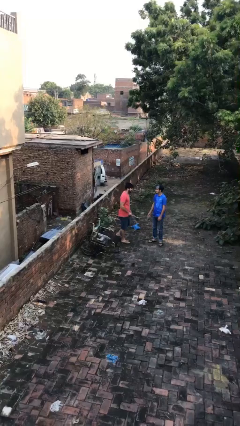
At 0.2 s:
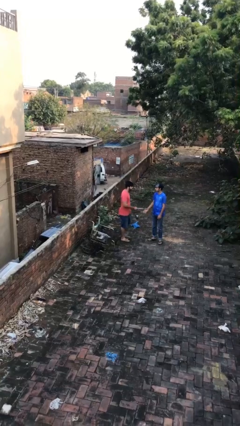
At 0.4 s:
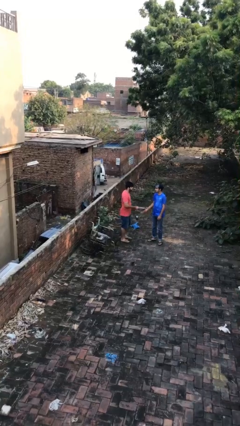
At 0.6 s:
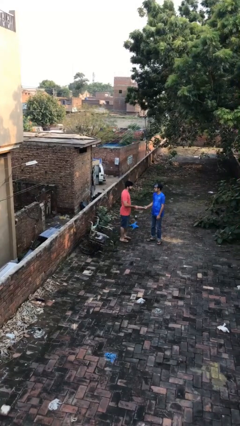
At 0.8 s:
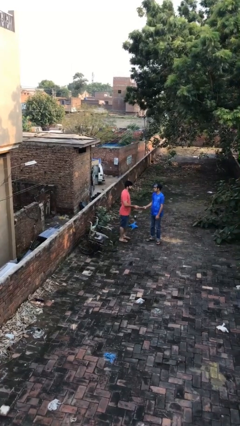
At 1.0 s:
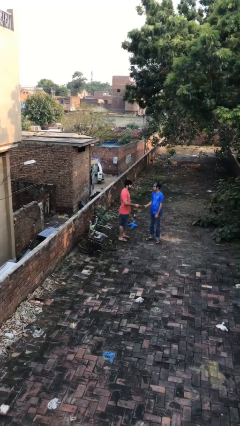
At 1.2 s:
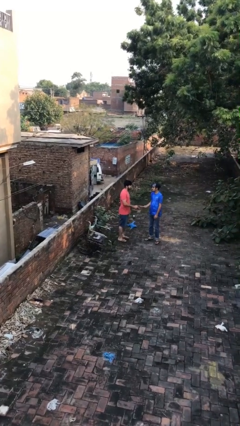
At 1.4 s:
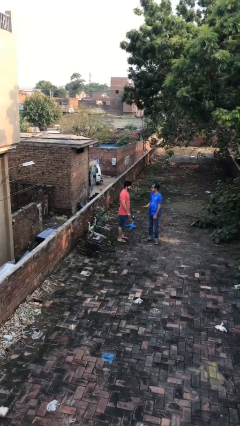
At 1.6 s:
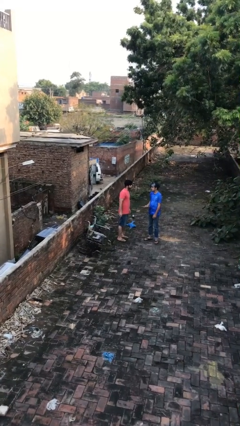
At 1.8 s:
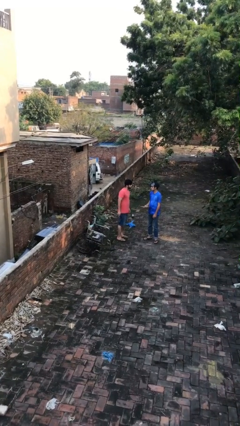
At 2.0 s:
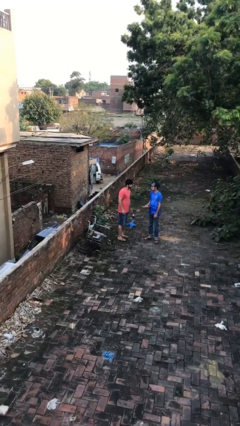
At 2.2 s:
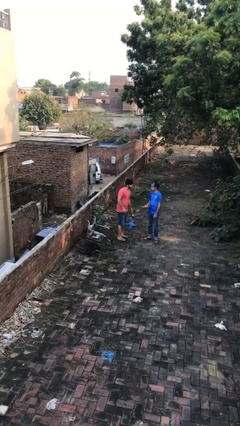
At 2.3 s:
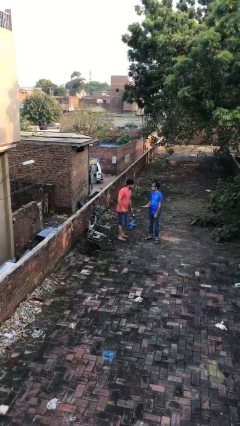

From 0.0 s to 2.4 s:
person transfers object to person

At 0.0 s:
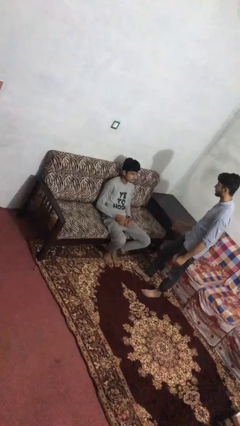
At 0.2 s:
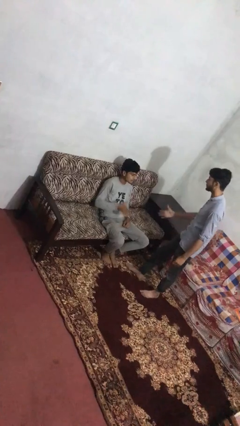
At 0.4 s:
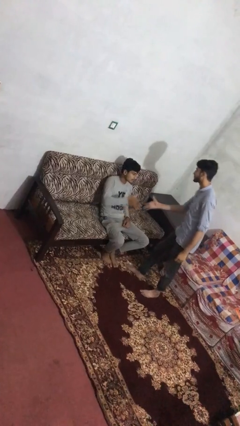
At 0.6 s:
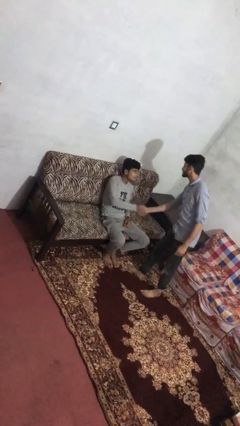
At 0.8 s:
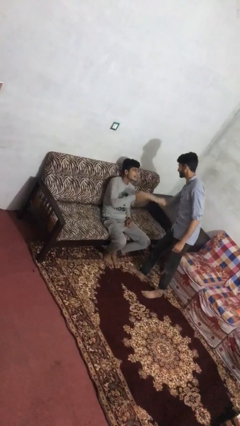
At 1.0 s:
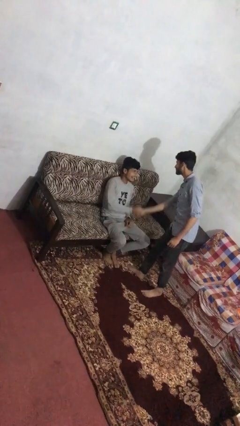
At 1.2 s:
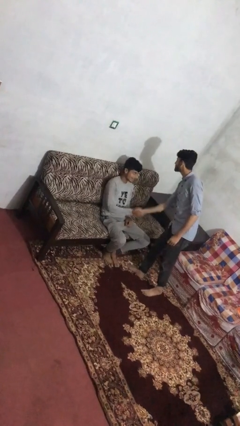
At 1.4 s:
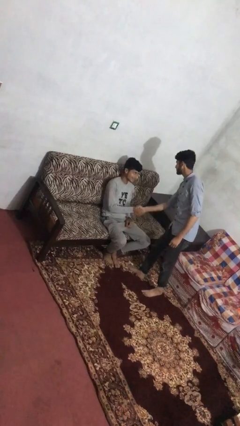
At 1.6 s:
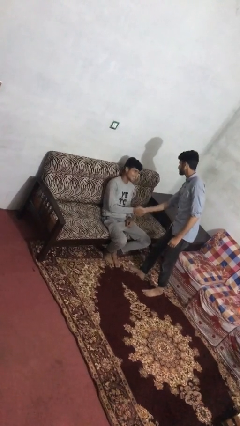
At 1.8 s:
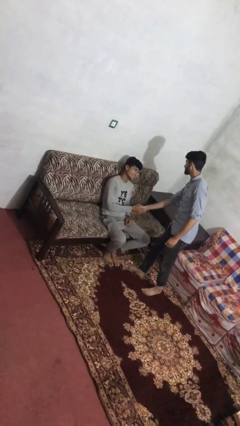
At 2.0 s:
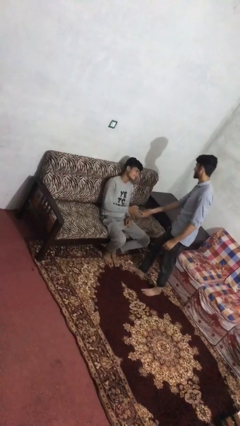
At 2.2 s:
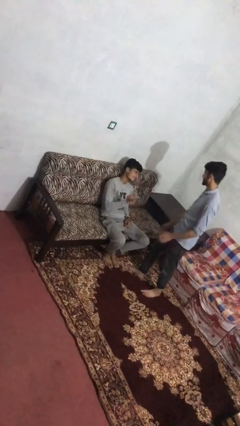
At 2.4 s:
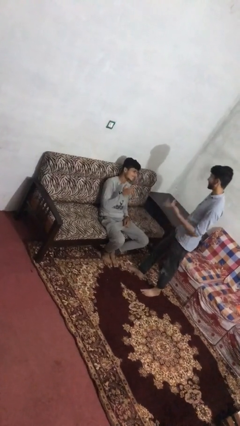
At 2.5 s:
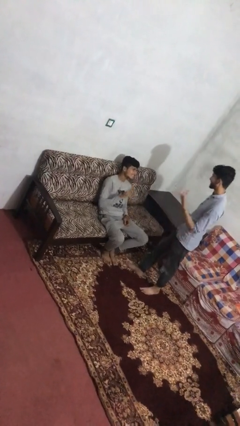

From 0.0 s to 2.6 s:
person shakes hand

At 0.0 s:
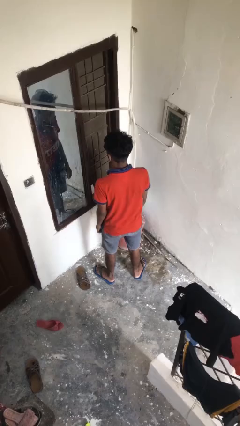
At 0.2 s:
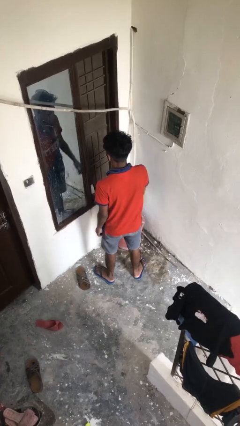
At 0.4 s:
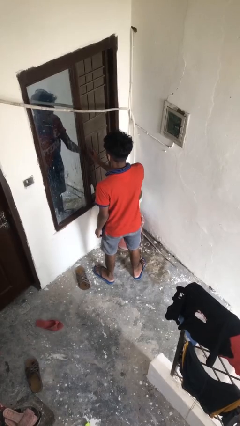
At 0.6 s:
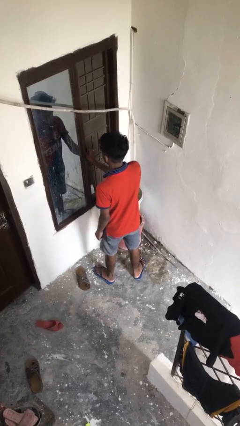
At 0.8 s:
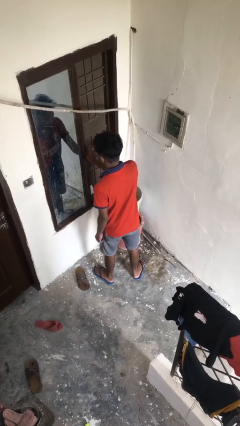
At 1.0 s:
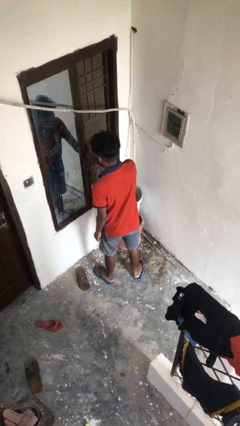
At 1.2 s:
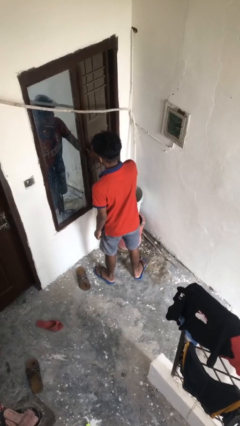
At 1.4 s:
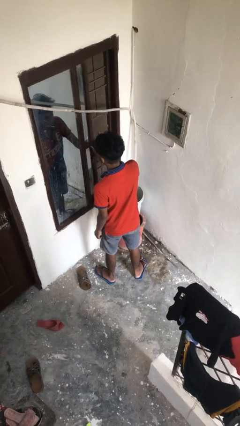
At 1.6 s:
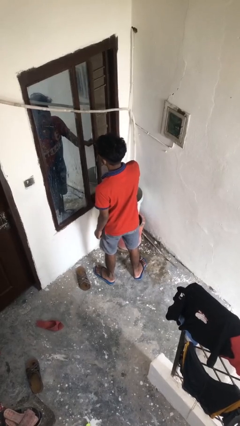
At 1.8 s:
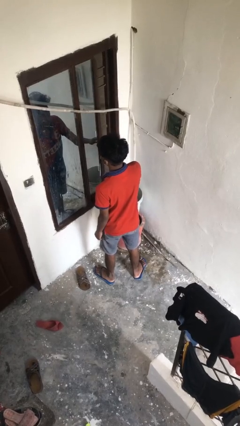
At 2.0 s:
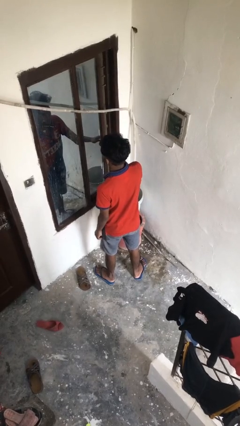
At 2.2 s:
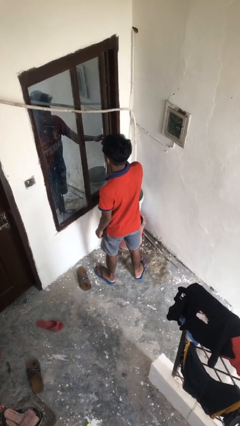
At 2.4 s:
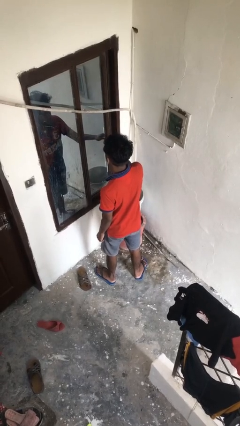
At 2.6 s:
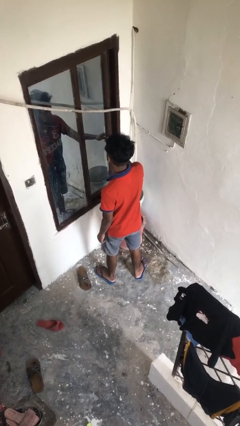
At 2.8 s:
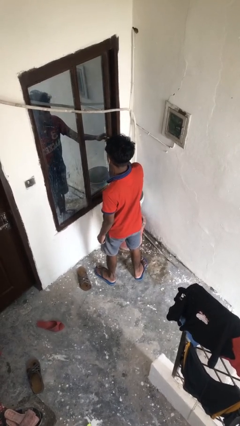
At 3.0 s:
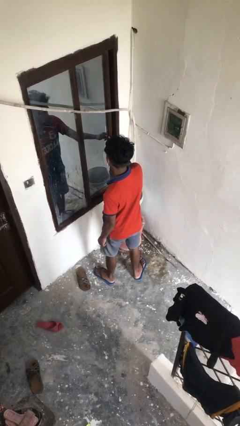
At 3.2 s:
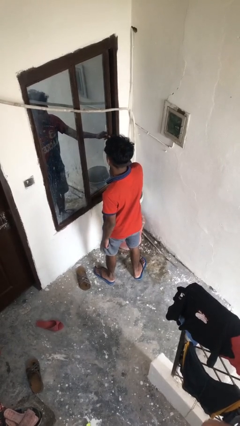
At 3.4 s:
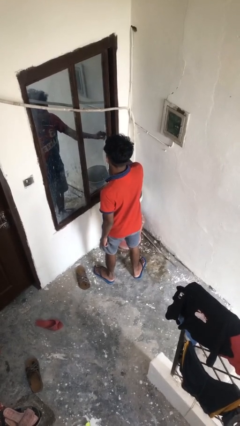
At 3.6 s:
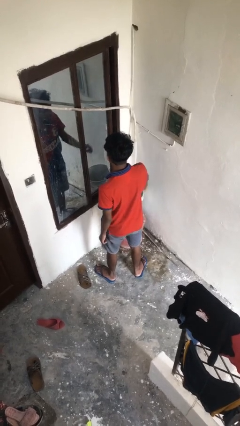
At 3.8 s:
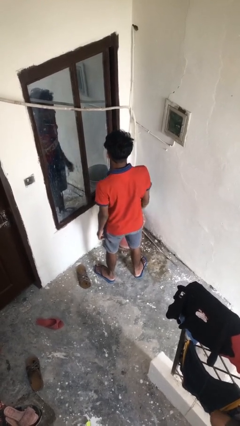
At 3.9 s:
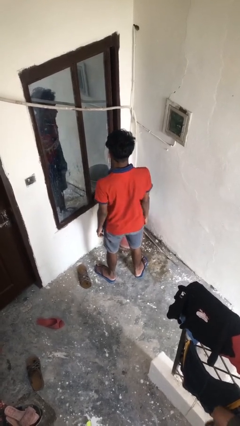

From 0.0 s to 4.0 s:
person closes home window

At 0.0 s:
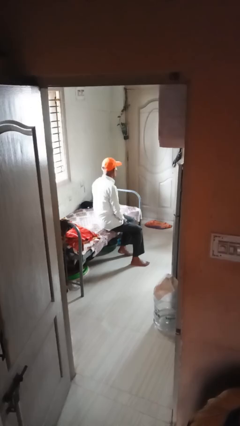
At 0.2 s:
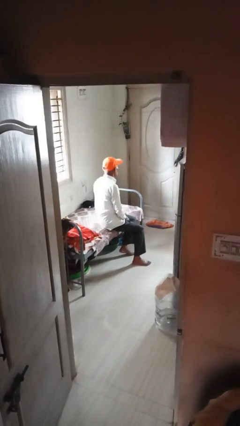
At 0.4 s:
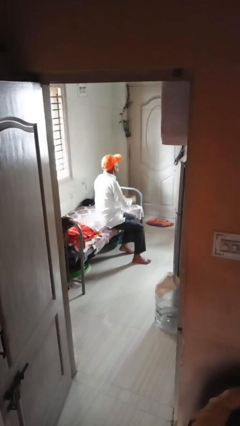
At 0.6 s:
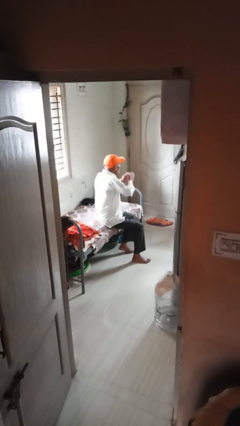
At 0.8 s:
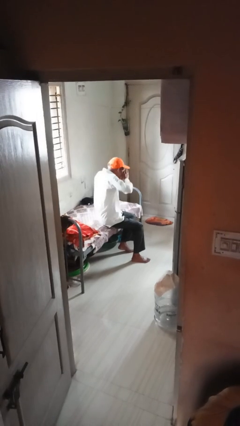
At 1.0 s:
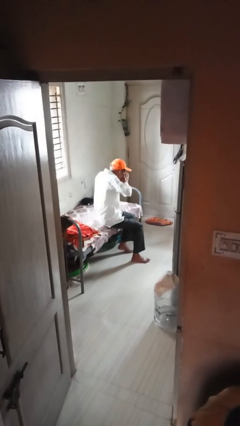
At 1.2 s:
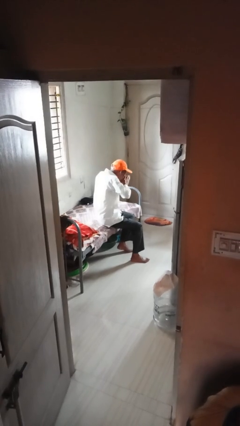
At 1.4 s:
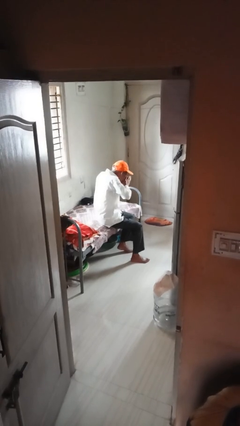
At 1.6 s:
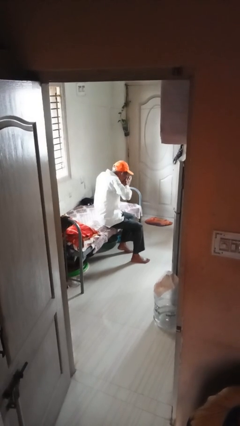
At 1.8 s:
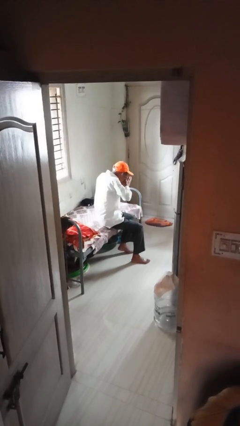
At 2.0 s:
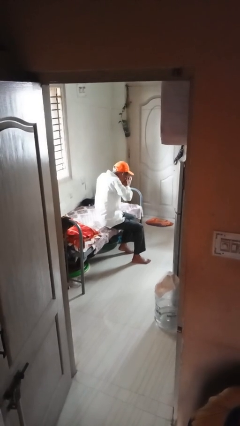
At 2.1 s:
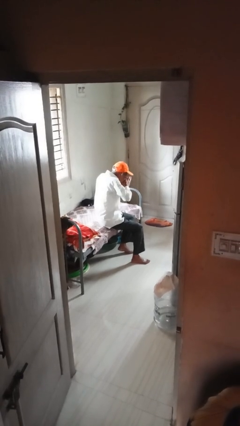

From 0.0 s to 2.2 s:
person sneezes into hand

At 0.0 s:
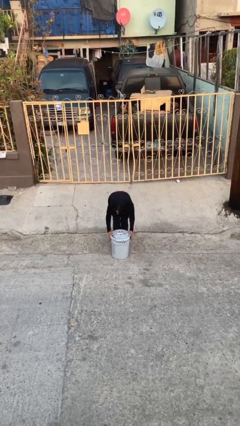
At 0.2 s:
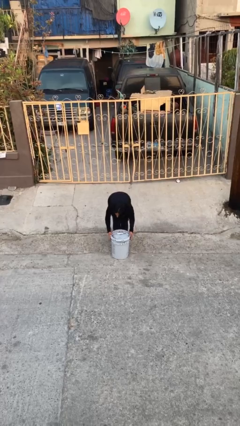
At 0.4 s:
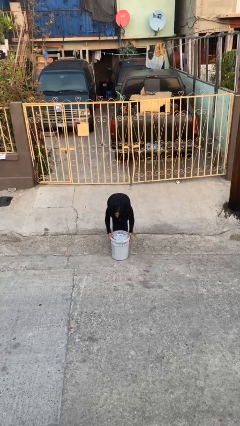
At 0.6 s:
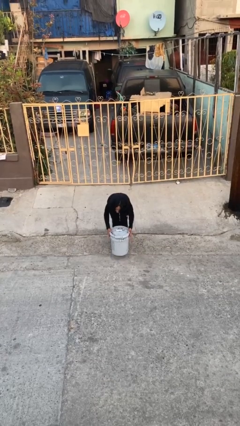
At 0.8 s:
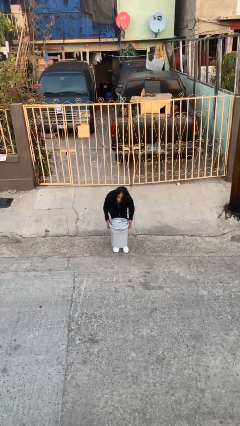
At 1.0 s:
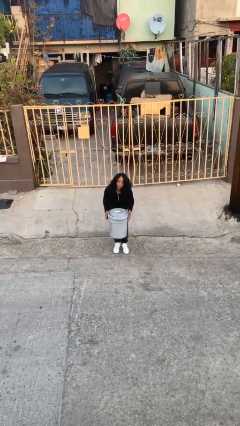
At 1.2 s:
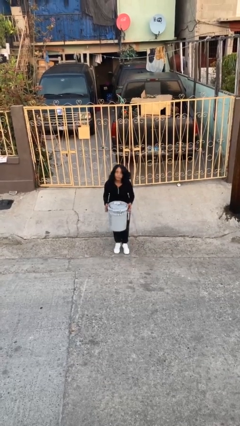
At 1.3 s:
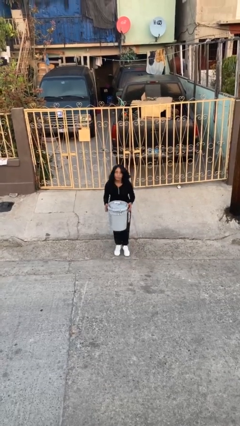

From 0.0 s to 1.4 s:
person picks up object from floor

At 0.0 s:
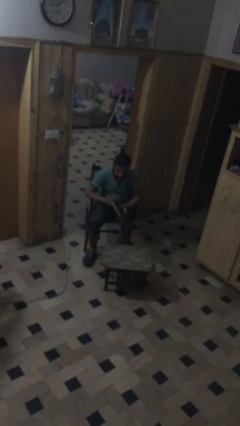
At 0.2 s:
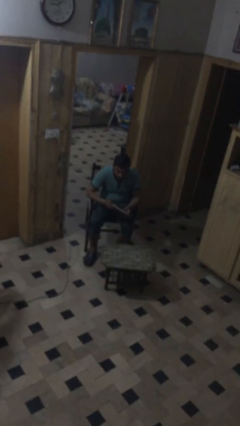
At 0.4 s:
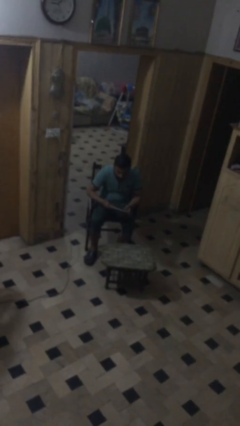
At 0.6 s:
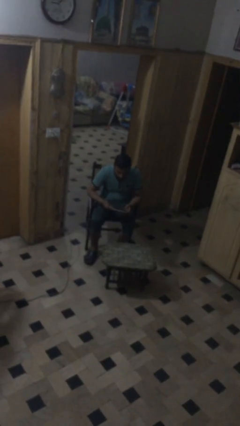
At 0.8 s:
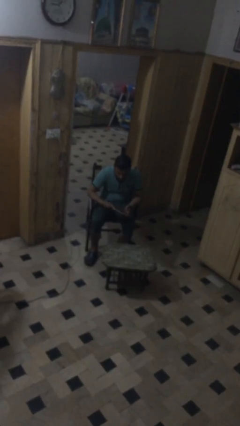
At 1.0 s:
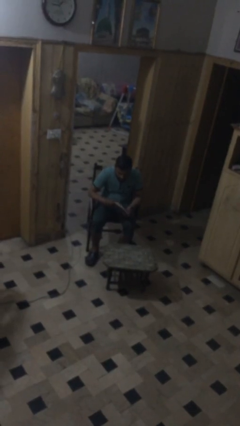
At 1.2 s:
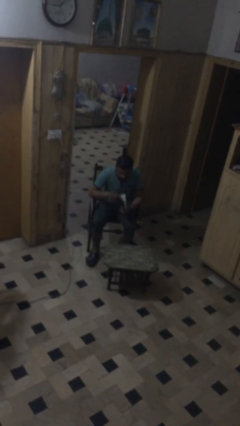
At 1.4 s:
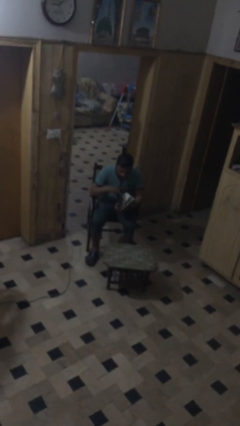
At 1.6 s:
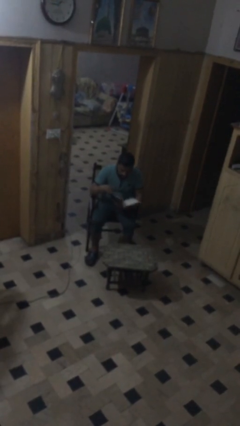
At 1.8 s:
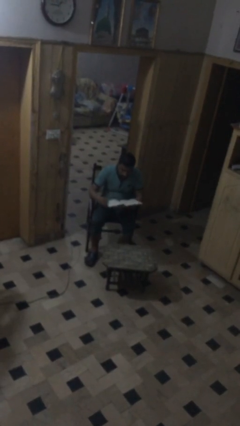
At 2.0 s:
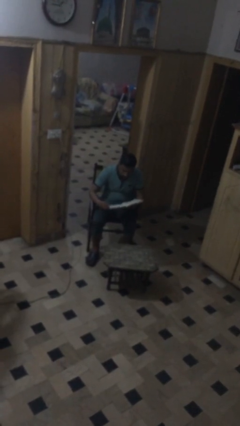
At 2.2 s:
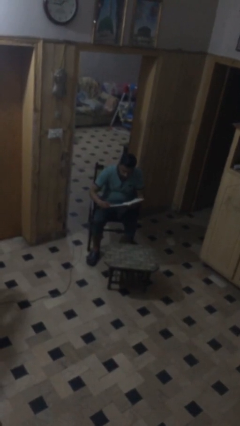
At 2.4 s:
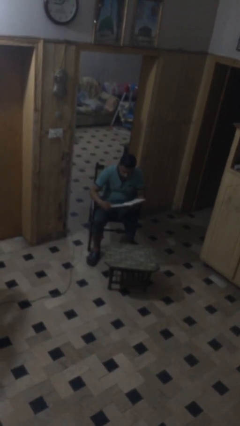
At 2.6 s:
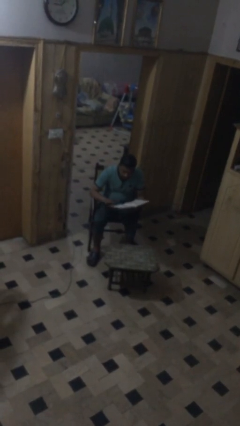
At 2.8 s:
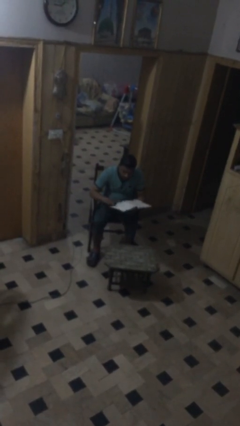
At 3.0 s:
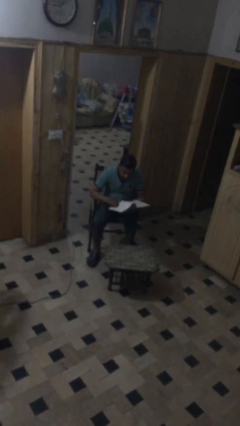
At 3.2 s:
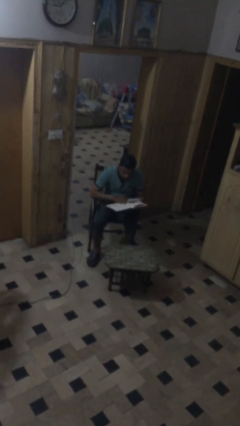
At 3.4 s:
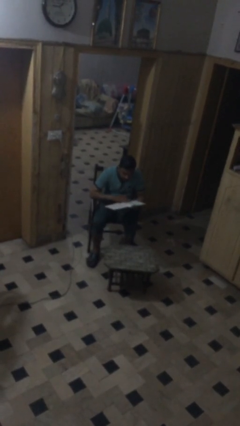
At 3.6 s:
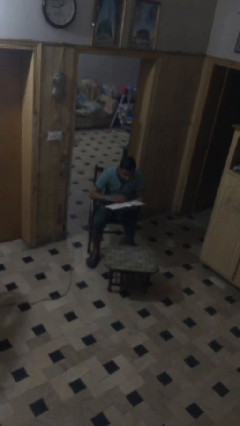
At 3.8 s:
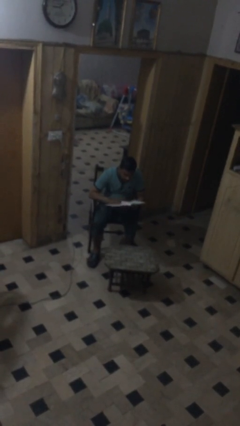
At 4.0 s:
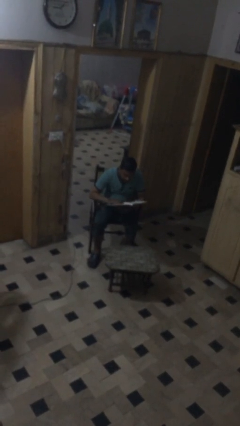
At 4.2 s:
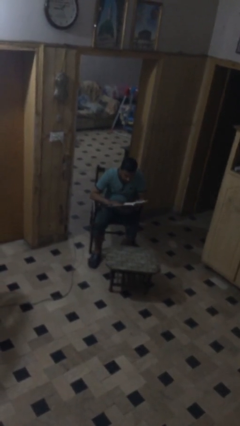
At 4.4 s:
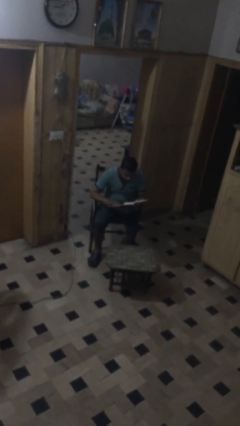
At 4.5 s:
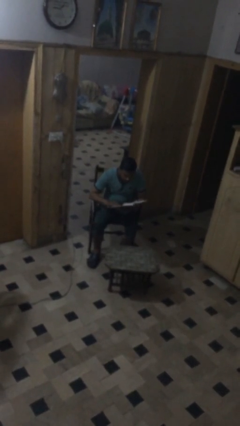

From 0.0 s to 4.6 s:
person reads document
